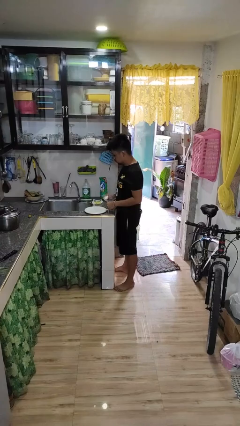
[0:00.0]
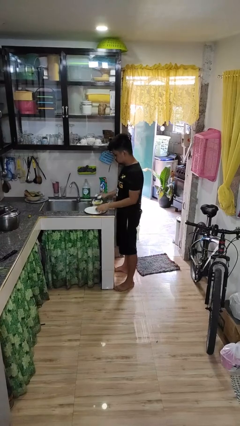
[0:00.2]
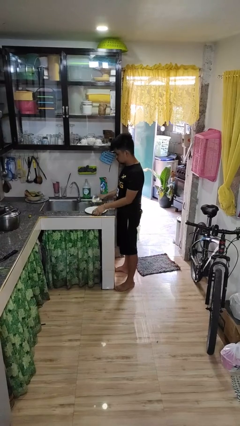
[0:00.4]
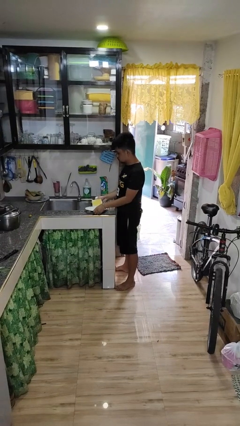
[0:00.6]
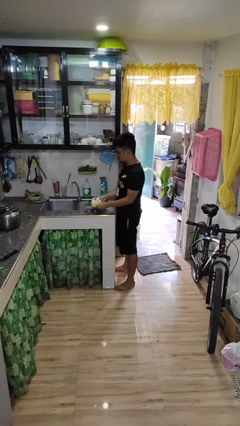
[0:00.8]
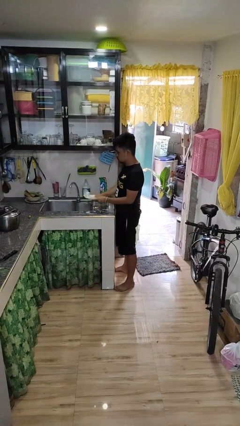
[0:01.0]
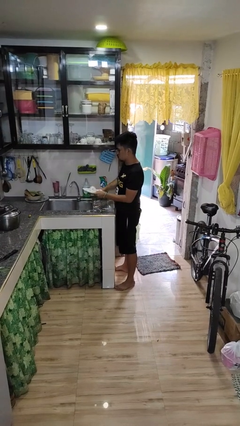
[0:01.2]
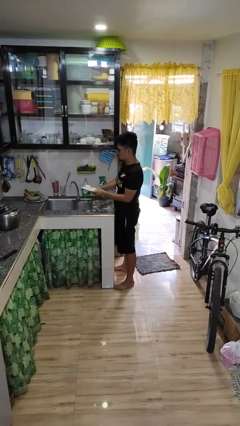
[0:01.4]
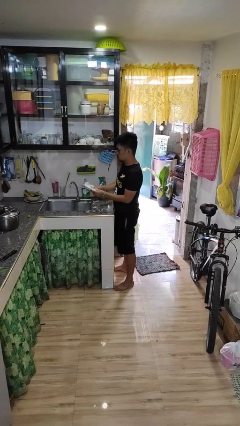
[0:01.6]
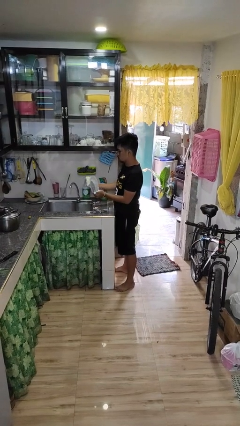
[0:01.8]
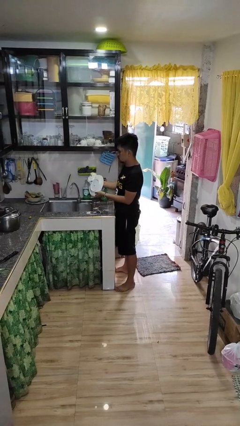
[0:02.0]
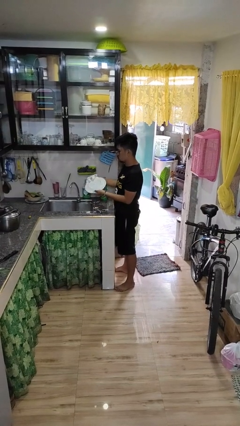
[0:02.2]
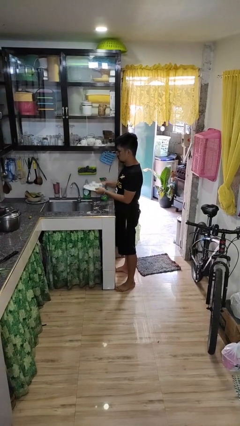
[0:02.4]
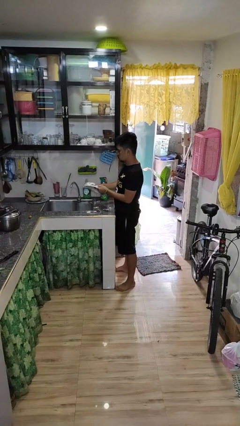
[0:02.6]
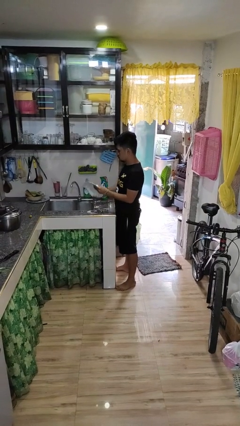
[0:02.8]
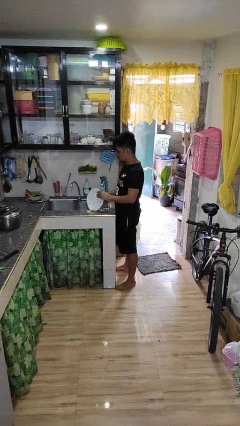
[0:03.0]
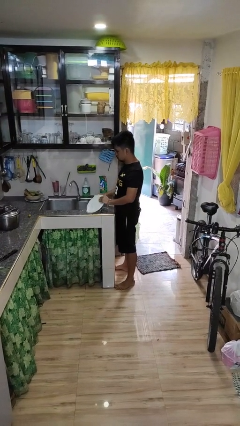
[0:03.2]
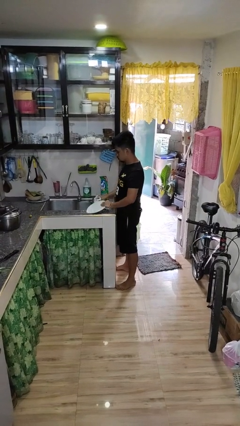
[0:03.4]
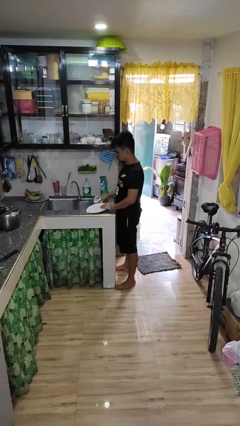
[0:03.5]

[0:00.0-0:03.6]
person washes dish

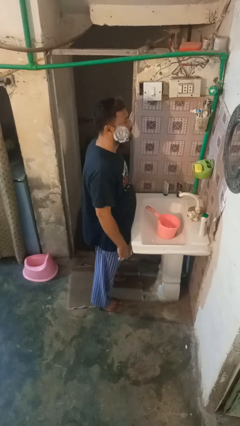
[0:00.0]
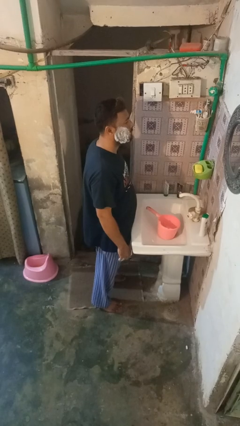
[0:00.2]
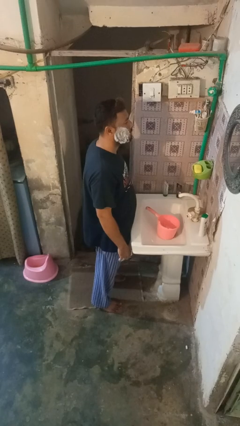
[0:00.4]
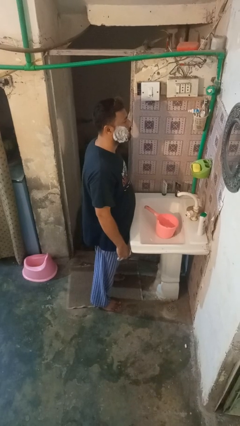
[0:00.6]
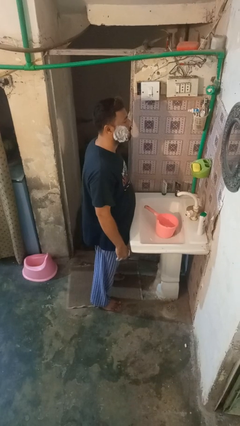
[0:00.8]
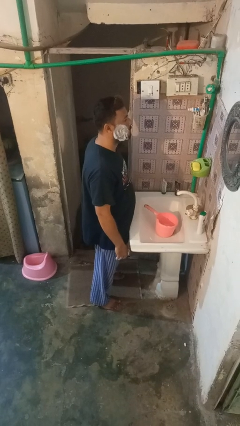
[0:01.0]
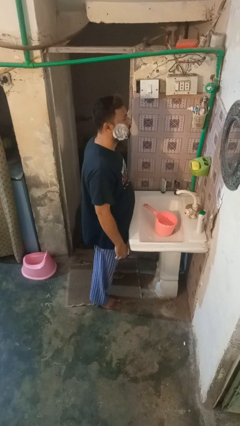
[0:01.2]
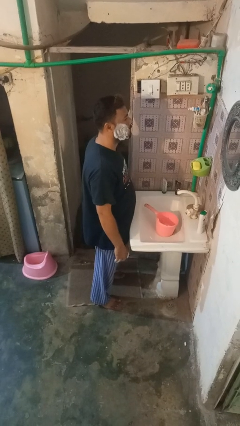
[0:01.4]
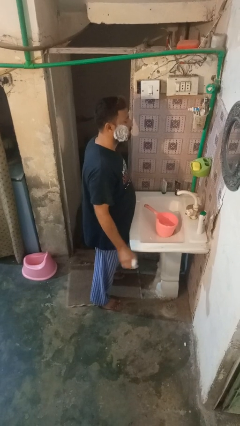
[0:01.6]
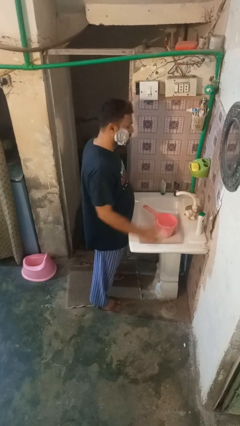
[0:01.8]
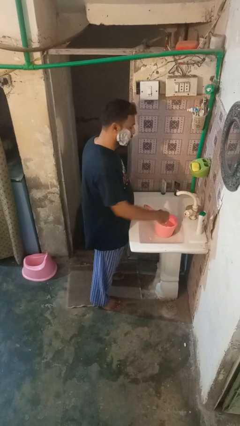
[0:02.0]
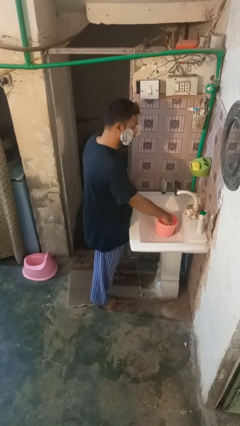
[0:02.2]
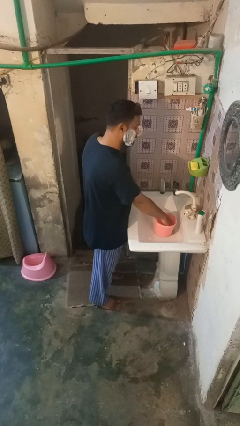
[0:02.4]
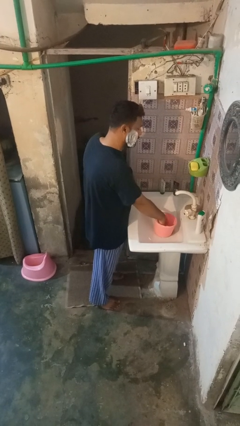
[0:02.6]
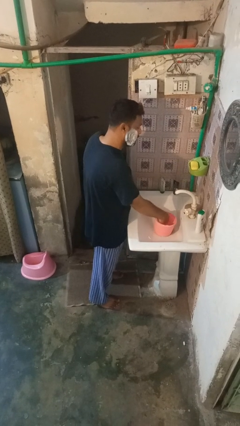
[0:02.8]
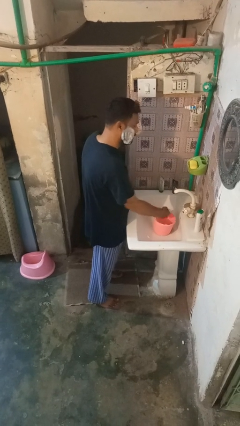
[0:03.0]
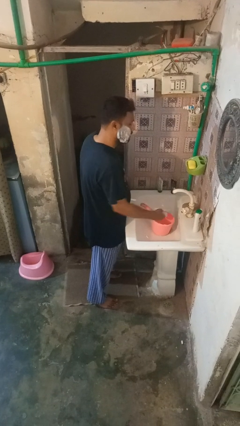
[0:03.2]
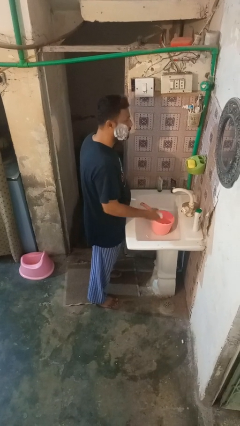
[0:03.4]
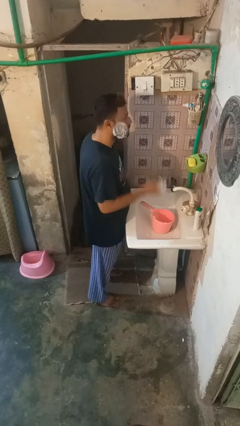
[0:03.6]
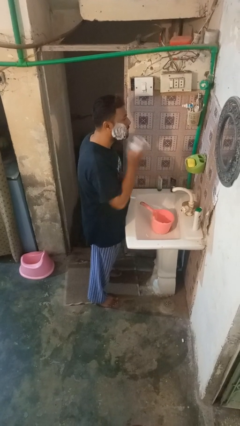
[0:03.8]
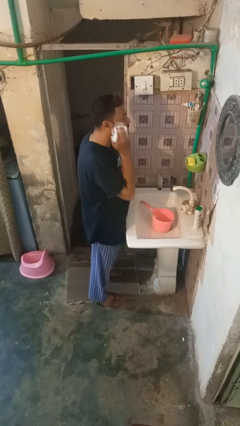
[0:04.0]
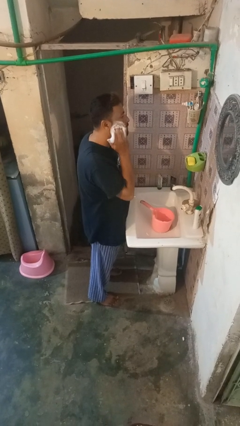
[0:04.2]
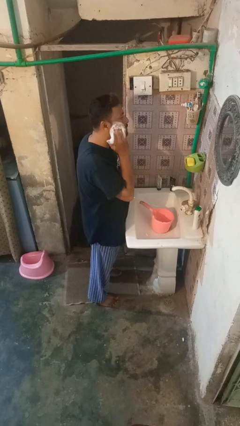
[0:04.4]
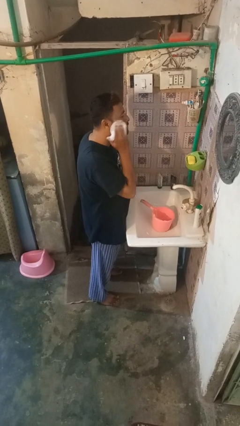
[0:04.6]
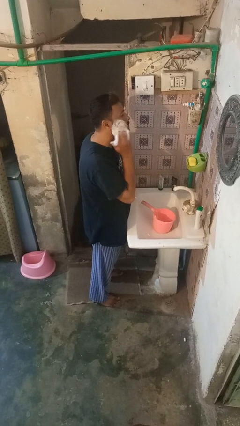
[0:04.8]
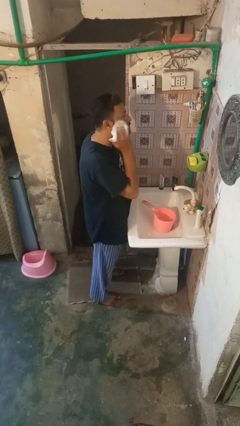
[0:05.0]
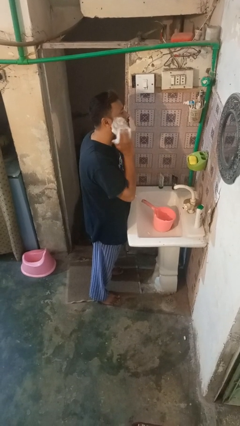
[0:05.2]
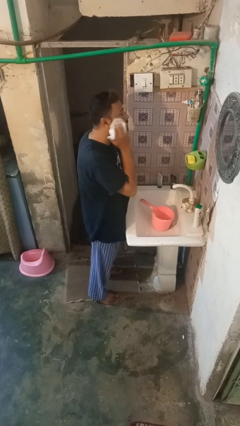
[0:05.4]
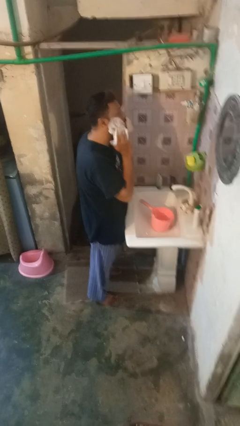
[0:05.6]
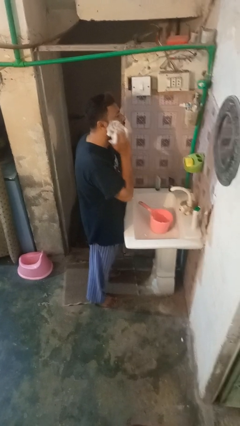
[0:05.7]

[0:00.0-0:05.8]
person applies shaving cream

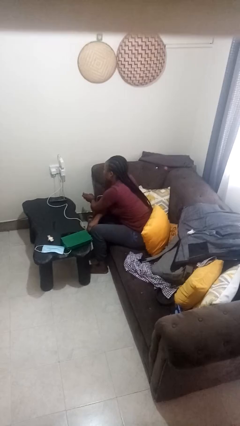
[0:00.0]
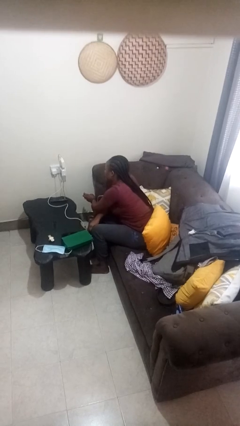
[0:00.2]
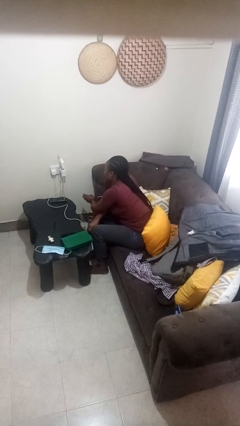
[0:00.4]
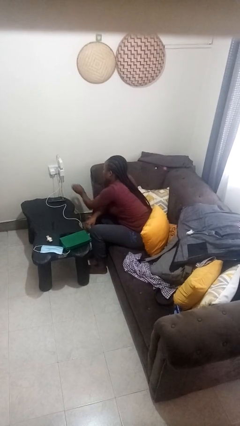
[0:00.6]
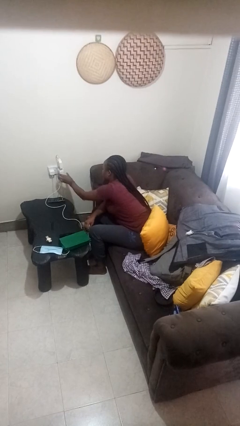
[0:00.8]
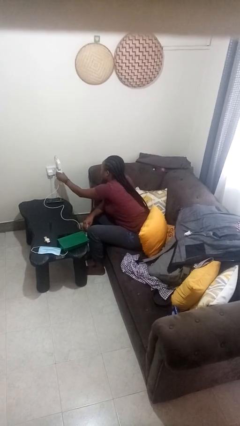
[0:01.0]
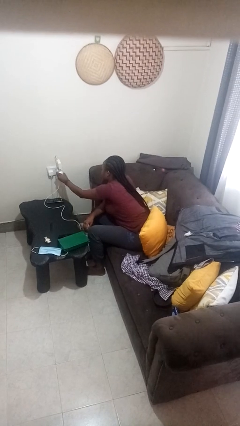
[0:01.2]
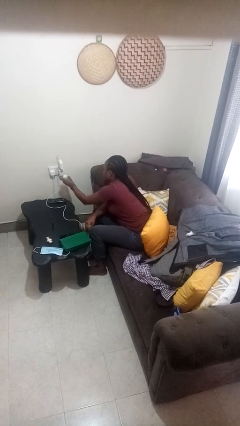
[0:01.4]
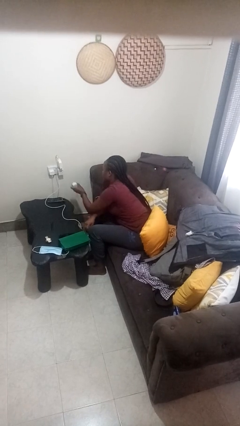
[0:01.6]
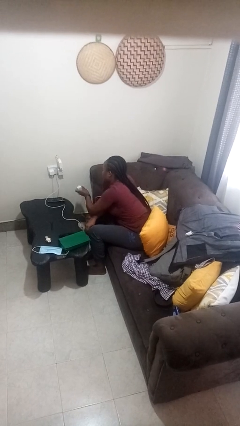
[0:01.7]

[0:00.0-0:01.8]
person unplugs from electrical socket

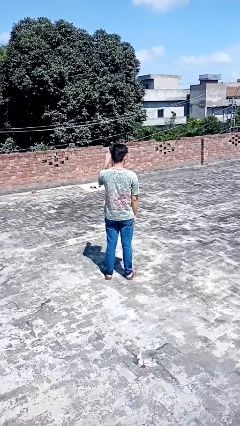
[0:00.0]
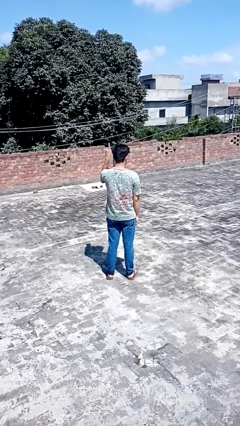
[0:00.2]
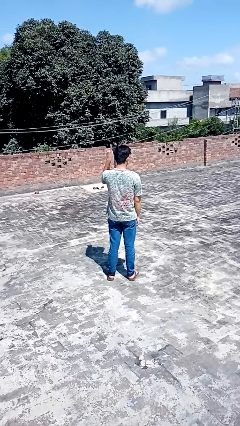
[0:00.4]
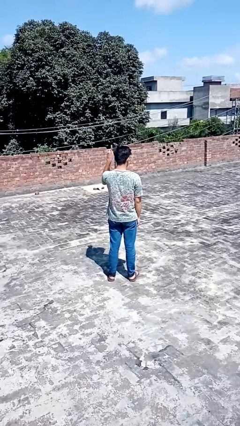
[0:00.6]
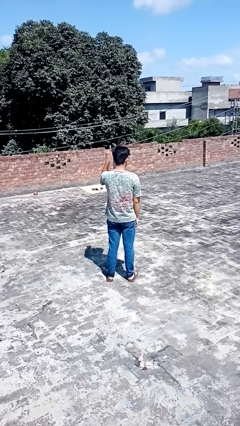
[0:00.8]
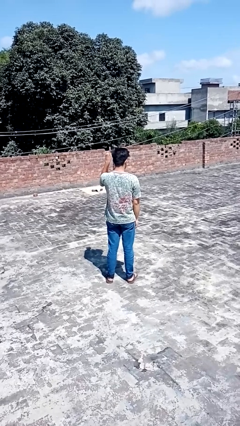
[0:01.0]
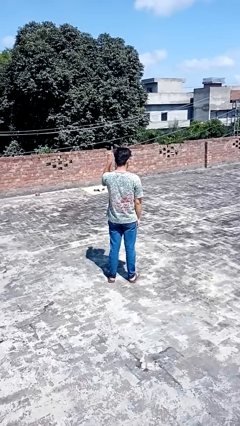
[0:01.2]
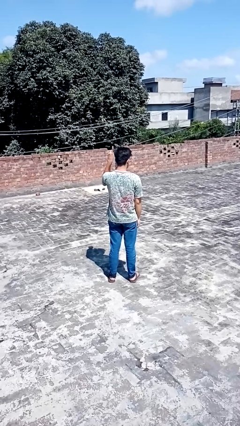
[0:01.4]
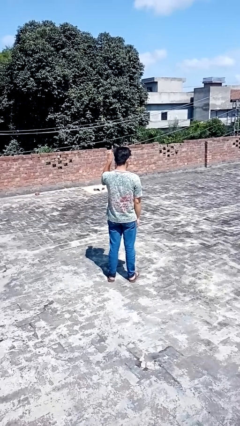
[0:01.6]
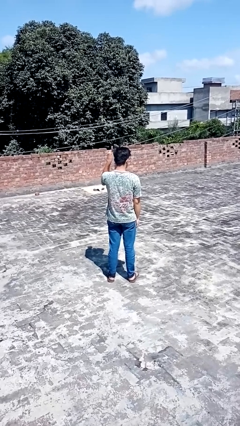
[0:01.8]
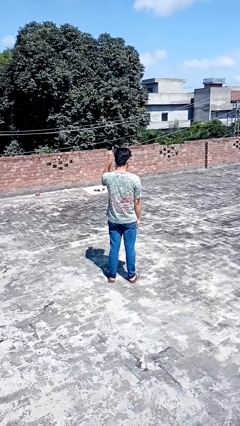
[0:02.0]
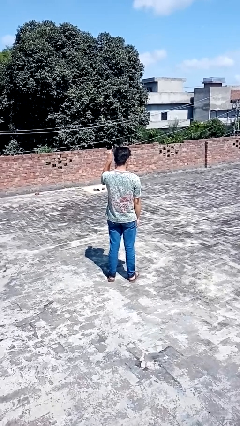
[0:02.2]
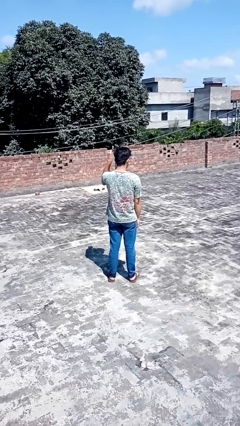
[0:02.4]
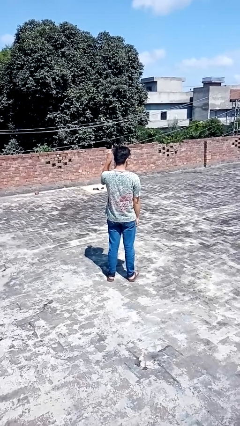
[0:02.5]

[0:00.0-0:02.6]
person gestures number one

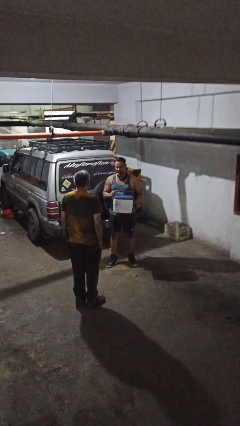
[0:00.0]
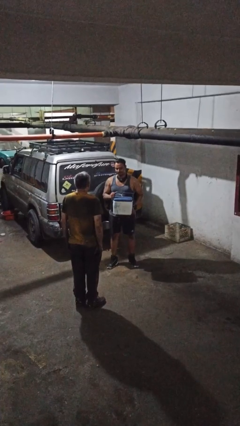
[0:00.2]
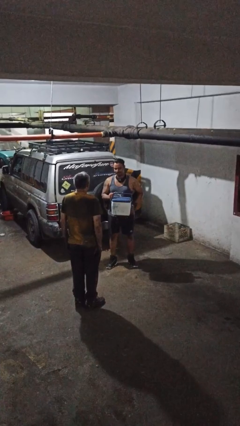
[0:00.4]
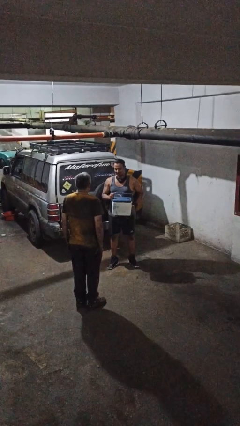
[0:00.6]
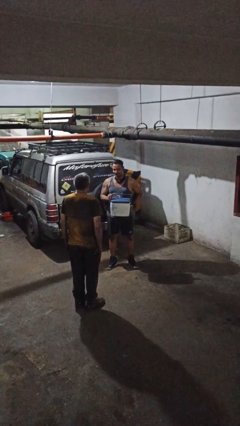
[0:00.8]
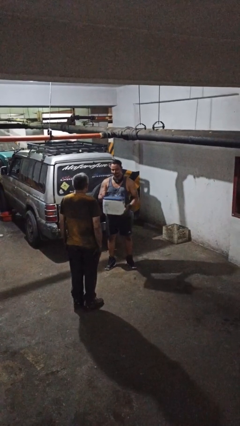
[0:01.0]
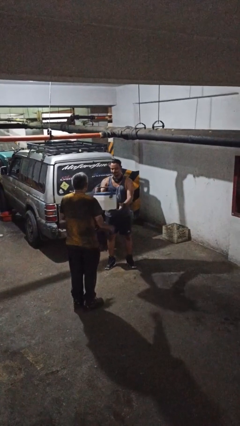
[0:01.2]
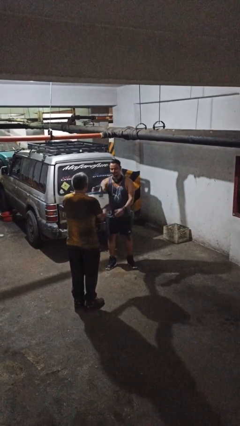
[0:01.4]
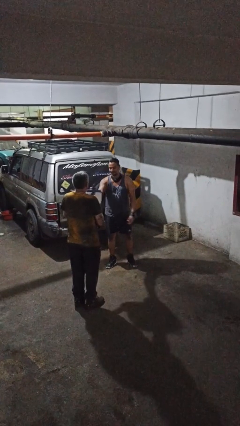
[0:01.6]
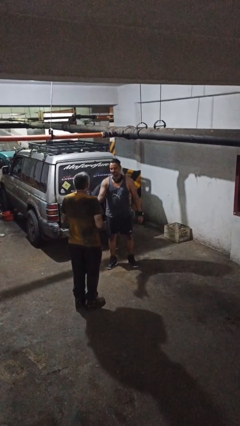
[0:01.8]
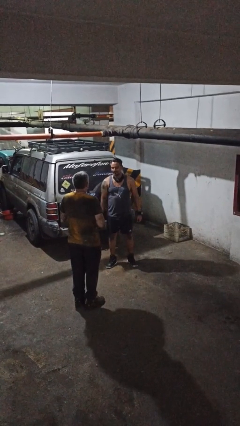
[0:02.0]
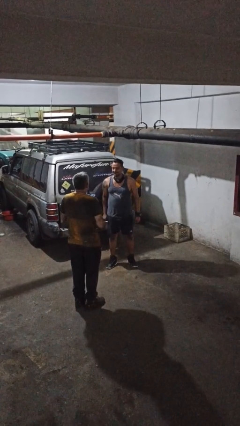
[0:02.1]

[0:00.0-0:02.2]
person transfers object to person

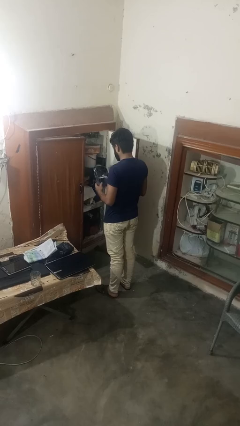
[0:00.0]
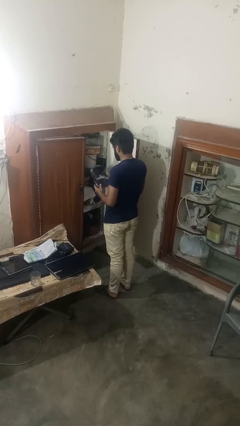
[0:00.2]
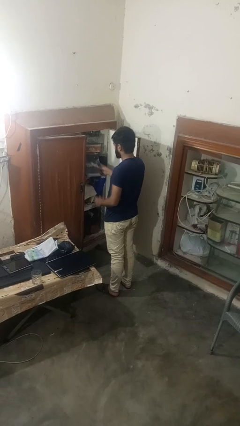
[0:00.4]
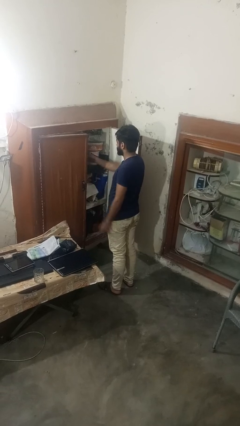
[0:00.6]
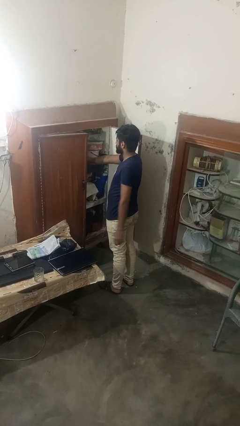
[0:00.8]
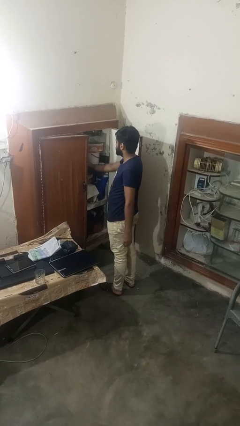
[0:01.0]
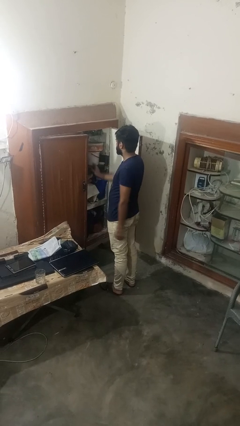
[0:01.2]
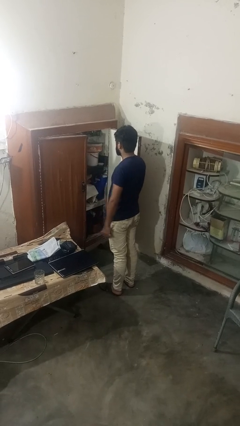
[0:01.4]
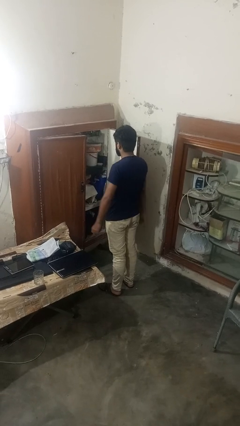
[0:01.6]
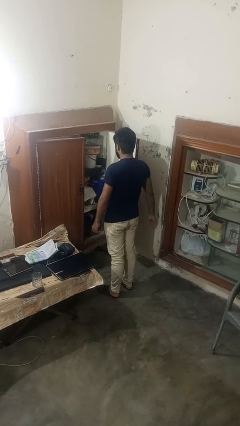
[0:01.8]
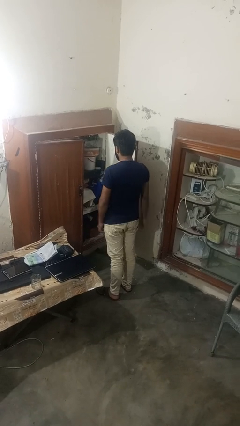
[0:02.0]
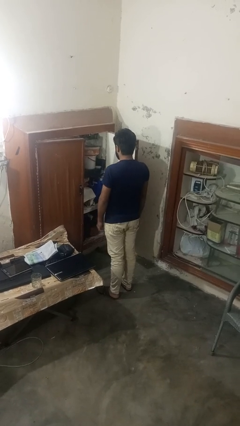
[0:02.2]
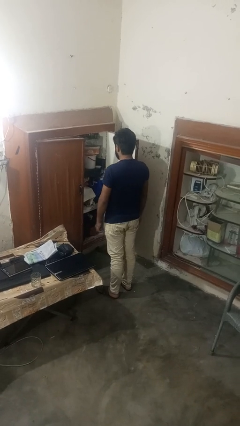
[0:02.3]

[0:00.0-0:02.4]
person puts down object into cabinet
